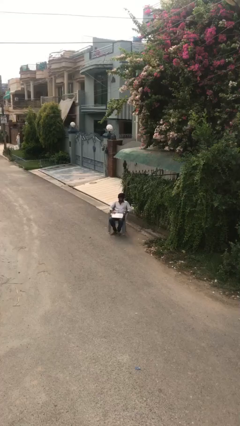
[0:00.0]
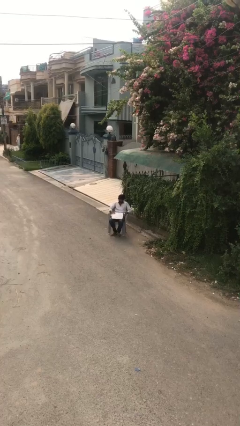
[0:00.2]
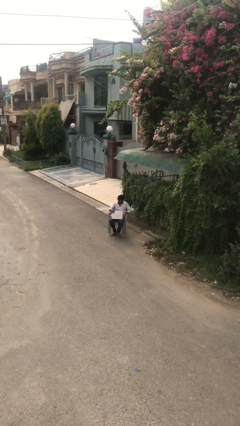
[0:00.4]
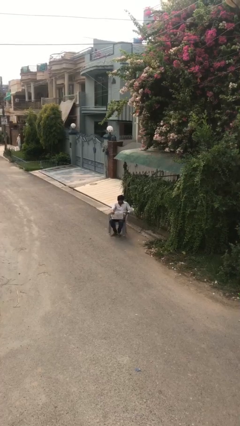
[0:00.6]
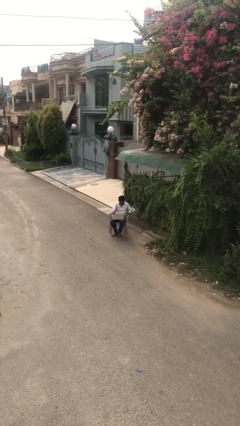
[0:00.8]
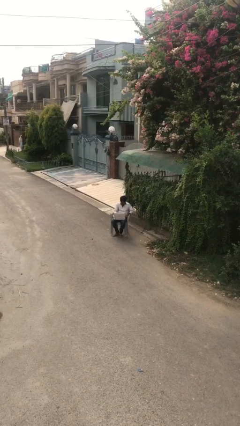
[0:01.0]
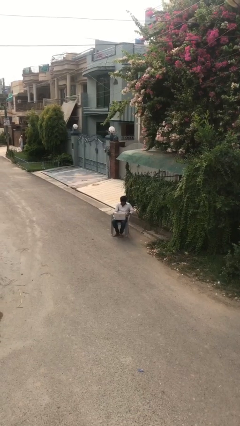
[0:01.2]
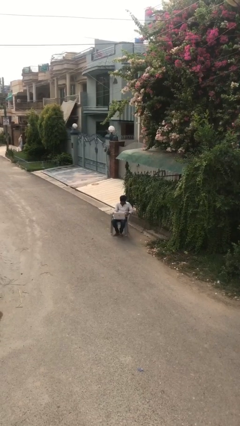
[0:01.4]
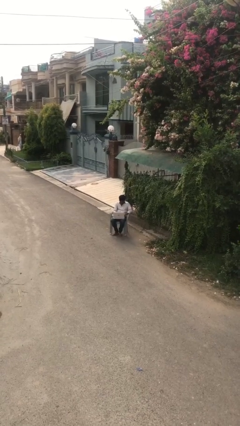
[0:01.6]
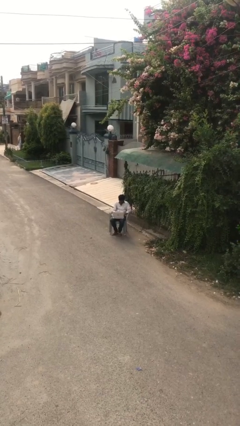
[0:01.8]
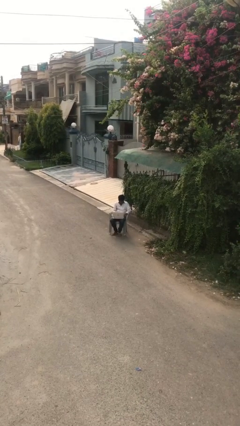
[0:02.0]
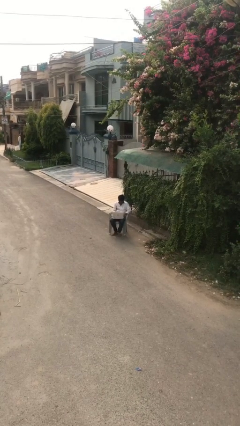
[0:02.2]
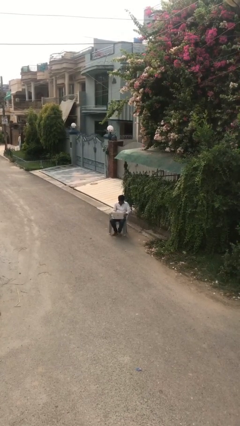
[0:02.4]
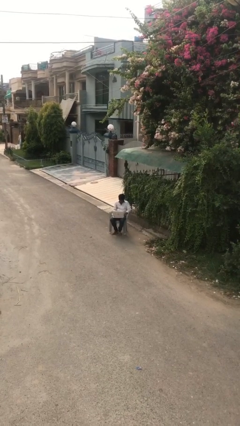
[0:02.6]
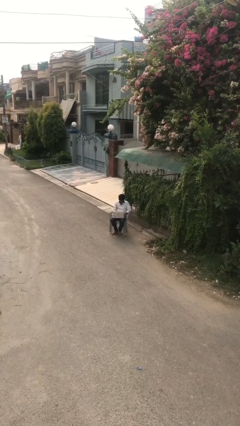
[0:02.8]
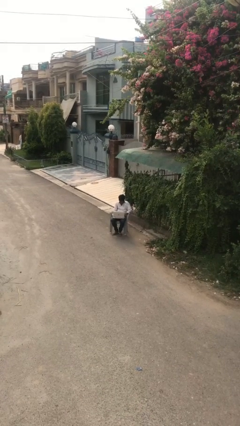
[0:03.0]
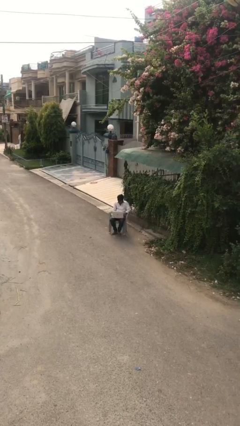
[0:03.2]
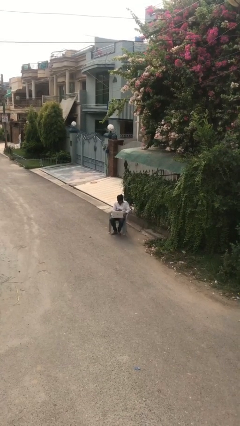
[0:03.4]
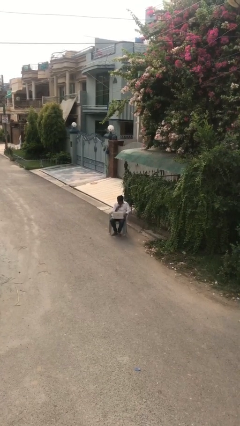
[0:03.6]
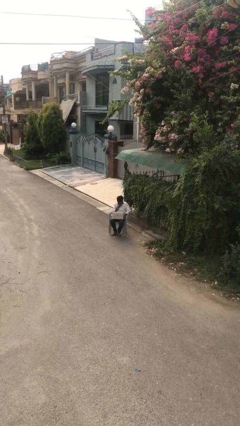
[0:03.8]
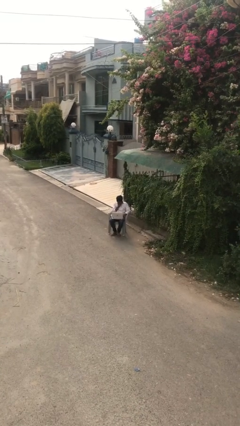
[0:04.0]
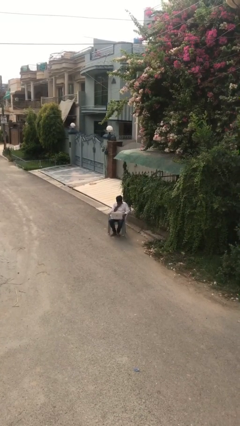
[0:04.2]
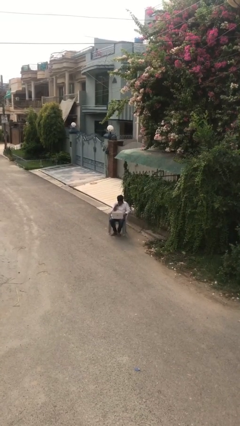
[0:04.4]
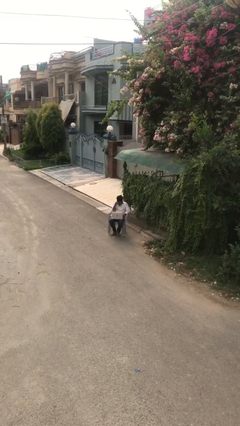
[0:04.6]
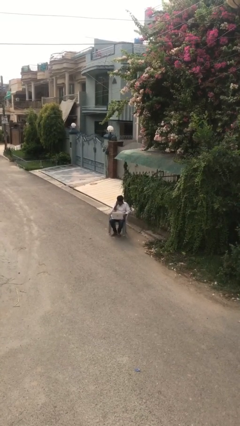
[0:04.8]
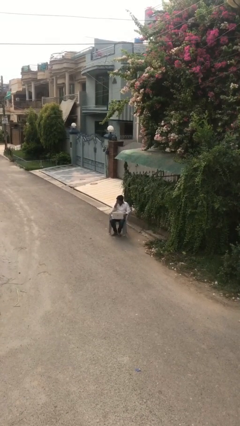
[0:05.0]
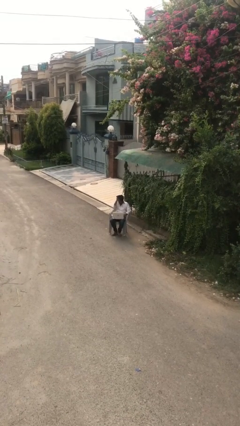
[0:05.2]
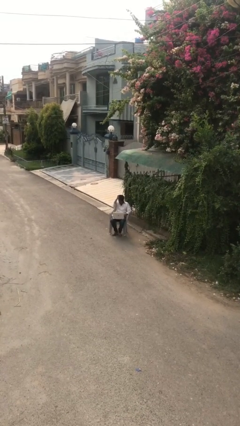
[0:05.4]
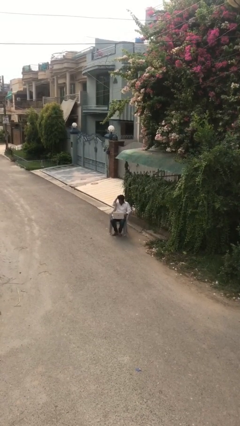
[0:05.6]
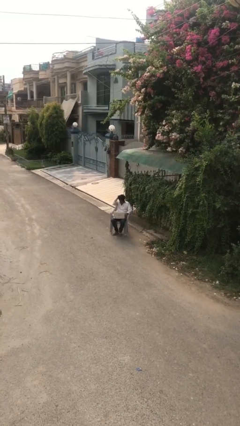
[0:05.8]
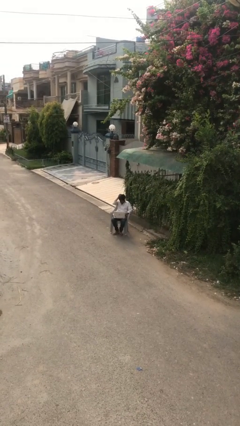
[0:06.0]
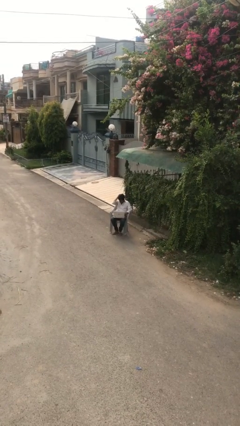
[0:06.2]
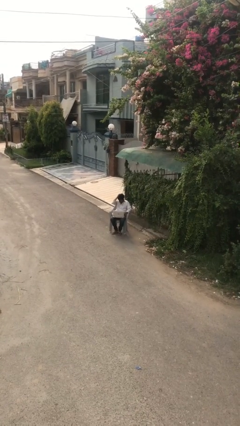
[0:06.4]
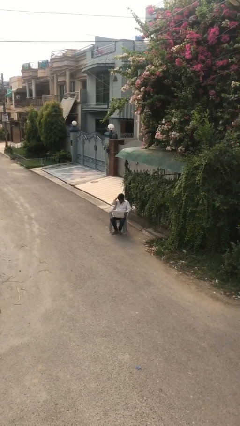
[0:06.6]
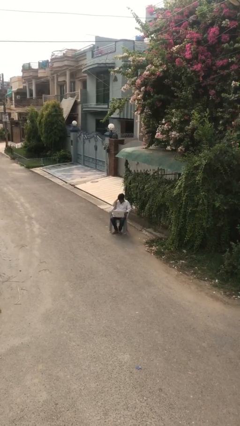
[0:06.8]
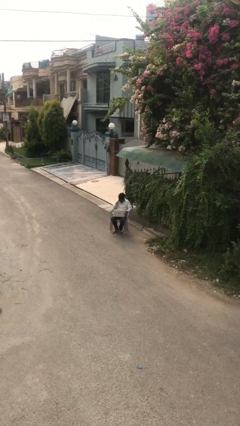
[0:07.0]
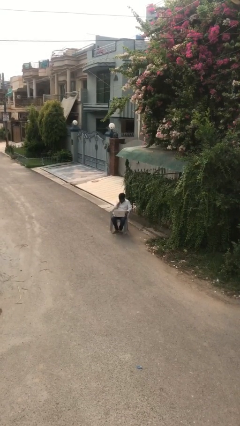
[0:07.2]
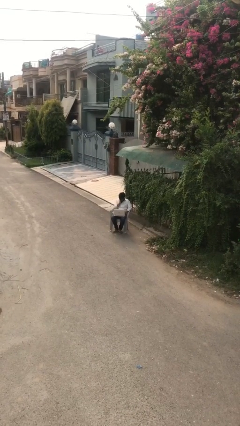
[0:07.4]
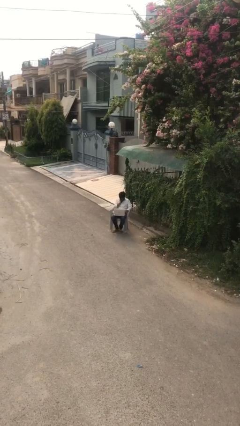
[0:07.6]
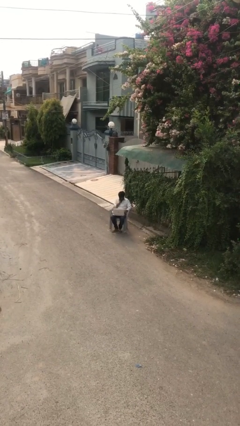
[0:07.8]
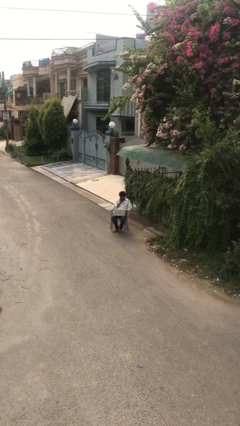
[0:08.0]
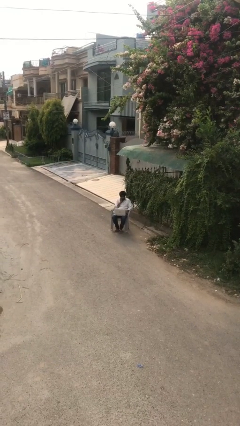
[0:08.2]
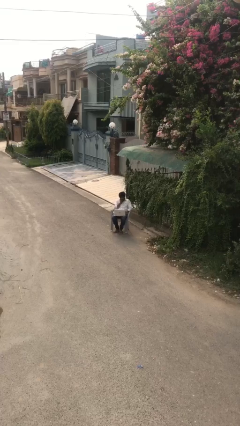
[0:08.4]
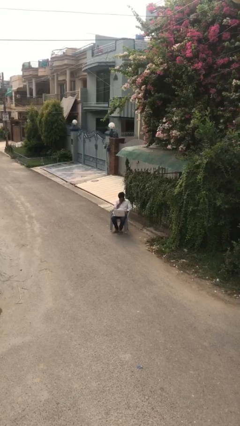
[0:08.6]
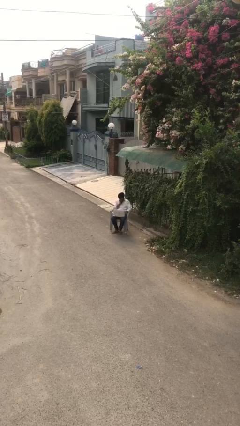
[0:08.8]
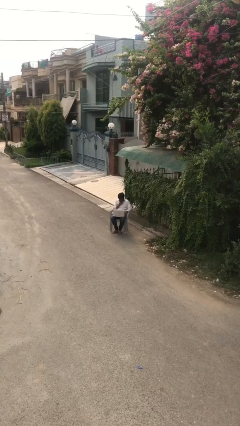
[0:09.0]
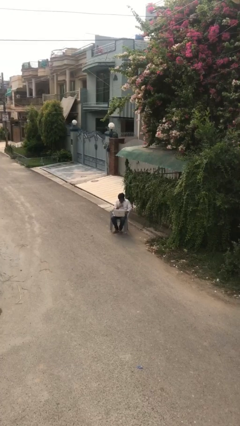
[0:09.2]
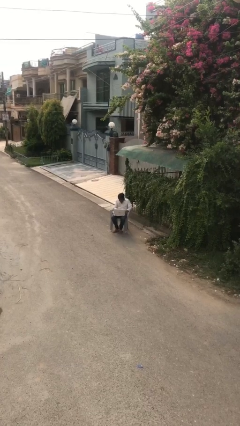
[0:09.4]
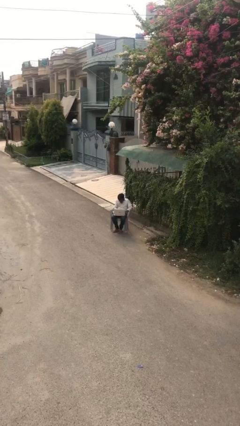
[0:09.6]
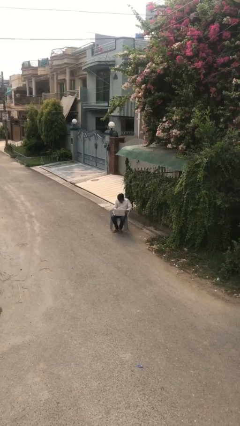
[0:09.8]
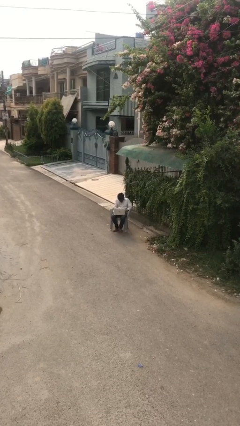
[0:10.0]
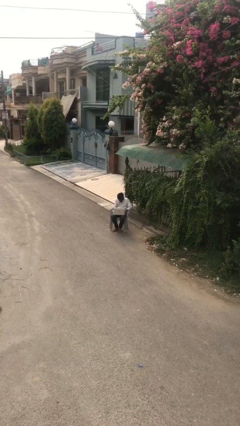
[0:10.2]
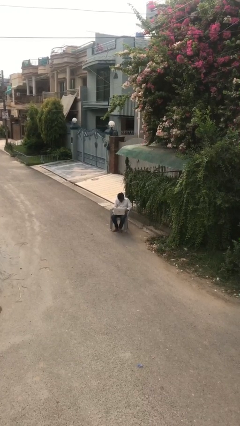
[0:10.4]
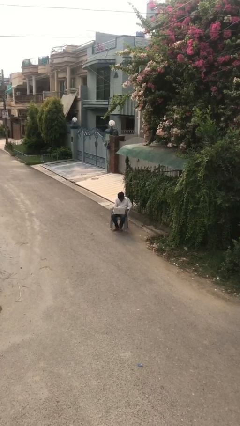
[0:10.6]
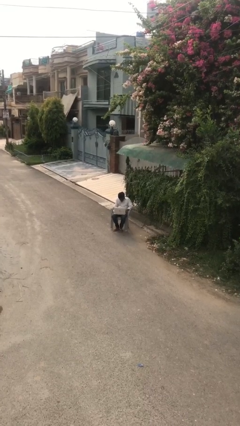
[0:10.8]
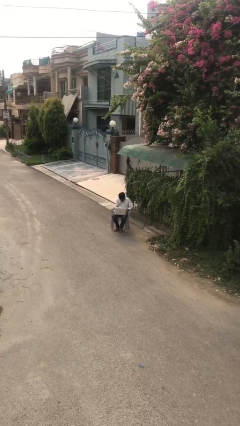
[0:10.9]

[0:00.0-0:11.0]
person interacts with laptop

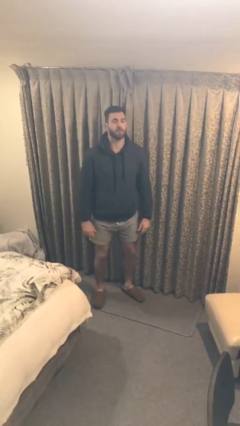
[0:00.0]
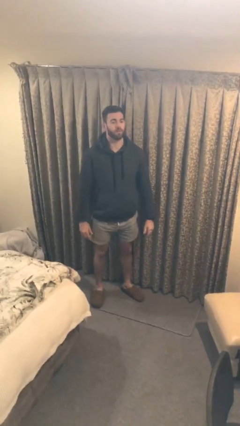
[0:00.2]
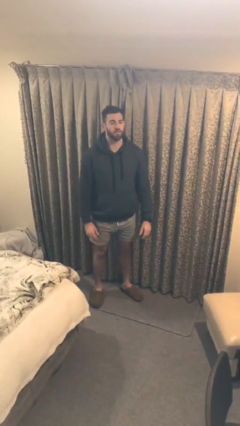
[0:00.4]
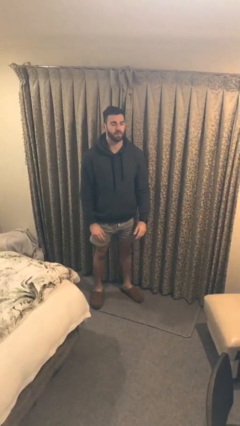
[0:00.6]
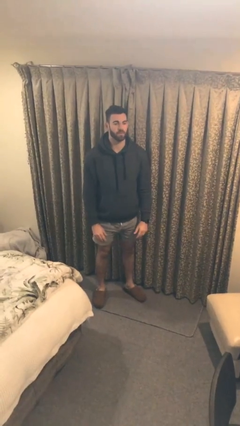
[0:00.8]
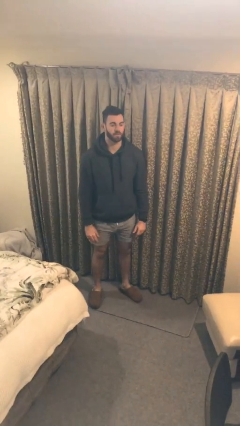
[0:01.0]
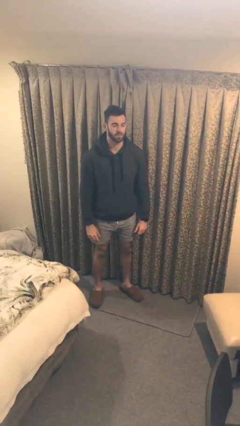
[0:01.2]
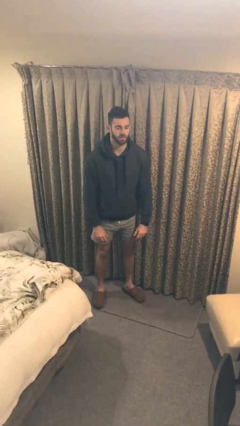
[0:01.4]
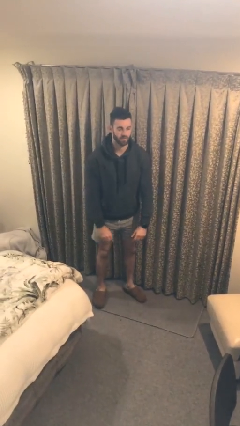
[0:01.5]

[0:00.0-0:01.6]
person stands up

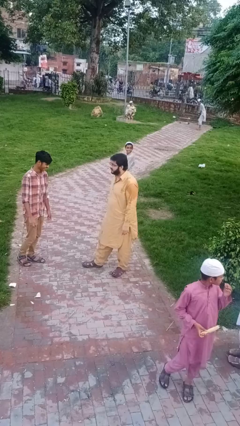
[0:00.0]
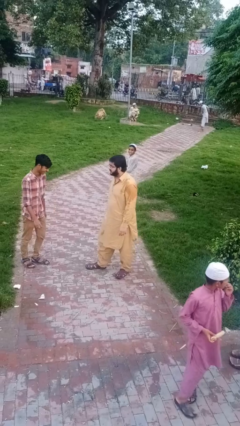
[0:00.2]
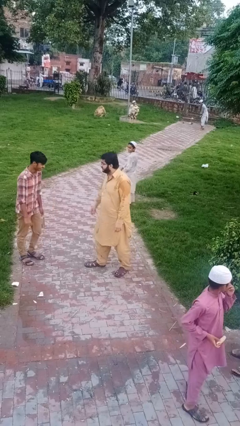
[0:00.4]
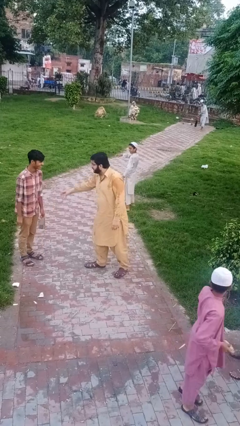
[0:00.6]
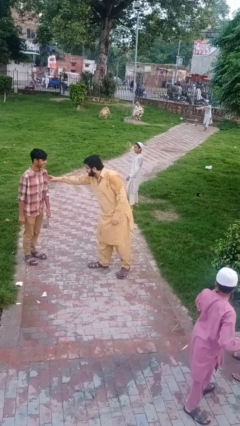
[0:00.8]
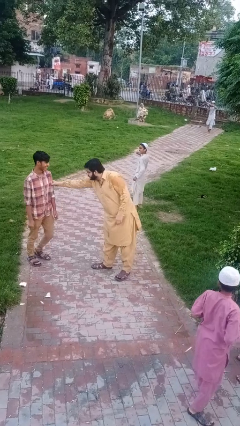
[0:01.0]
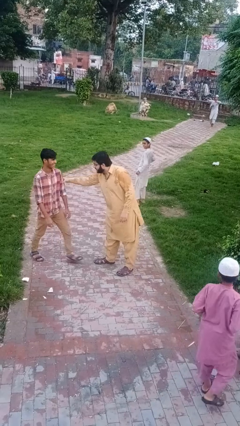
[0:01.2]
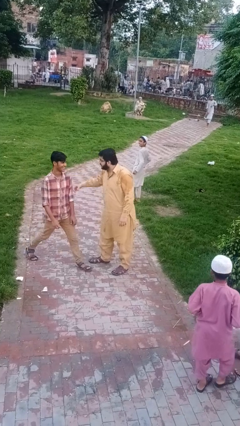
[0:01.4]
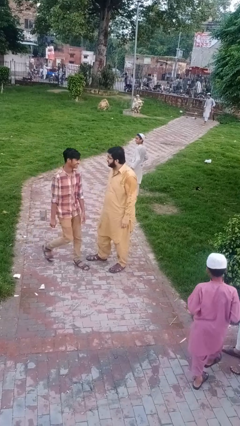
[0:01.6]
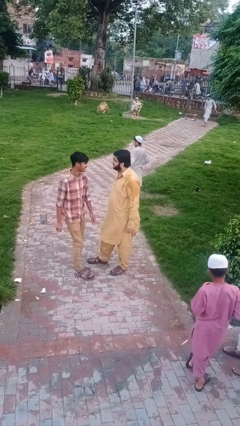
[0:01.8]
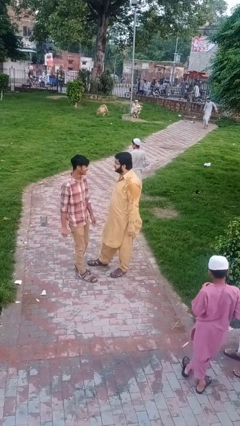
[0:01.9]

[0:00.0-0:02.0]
person grabs person by bicep

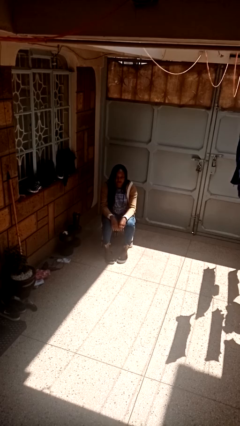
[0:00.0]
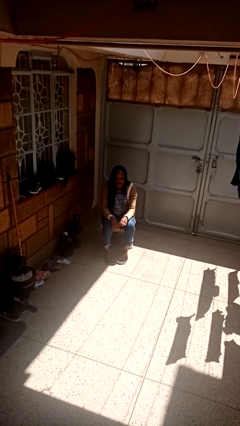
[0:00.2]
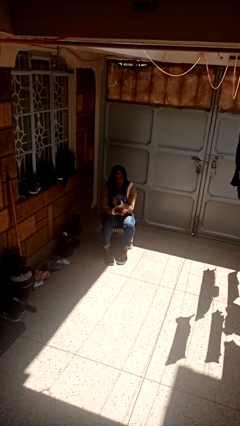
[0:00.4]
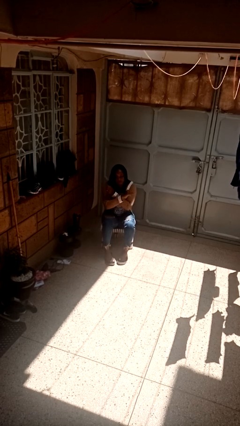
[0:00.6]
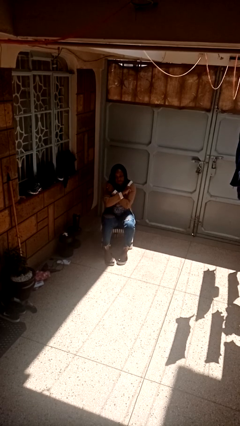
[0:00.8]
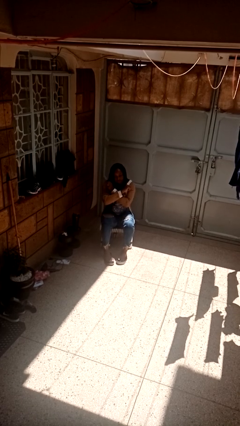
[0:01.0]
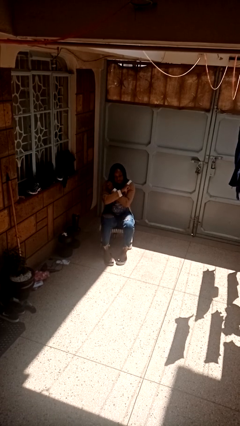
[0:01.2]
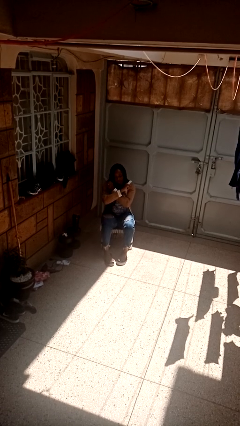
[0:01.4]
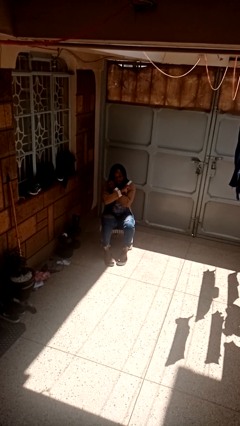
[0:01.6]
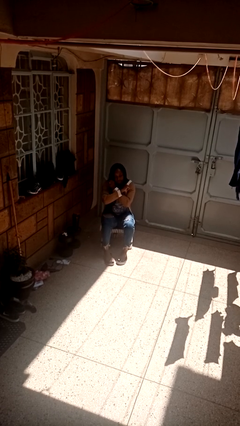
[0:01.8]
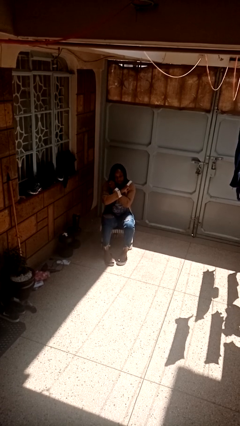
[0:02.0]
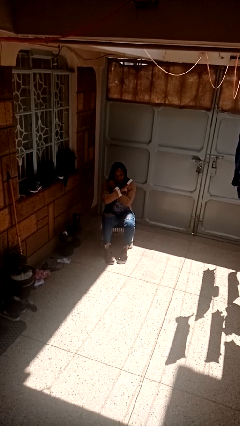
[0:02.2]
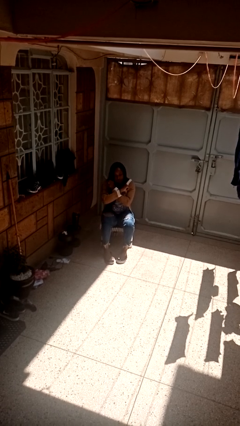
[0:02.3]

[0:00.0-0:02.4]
person gestures arms x

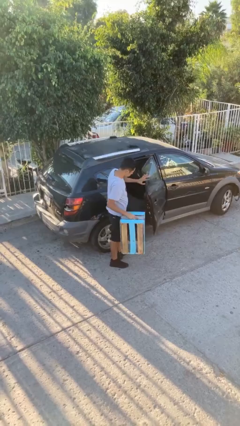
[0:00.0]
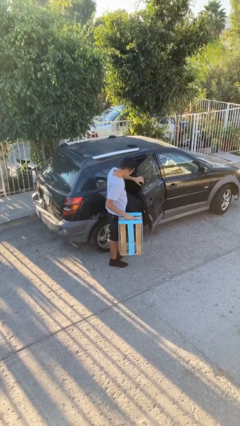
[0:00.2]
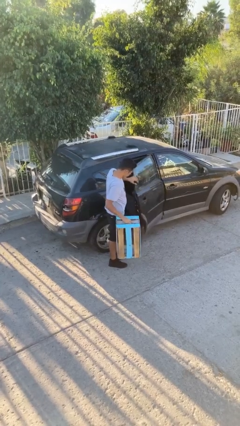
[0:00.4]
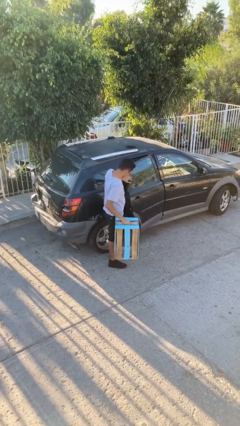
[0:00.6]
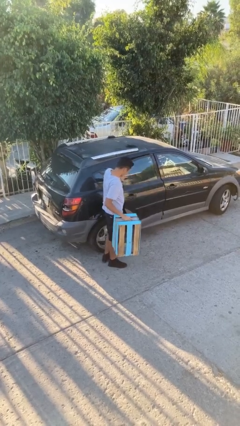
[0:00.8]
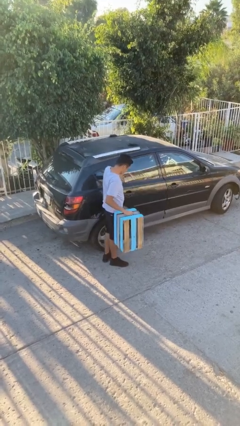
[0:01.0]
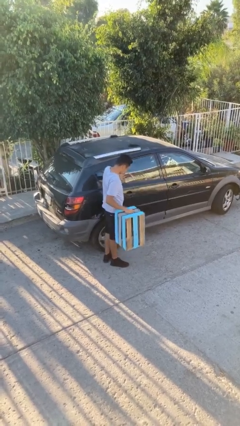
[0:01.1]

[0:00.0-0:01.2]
person closes car door
